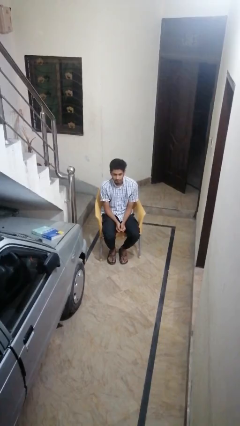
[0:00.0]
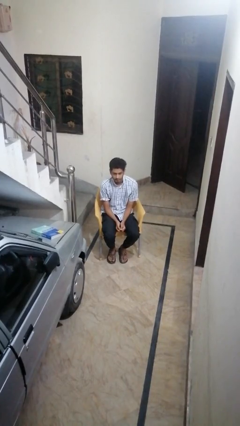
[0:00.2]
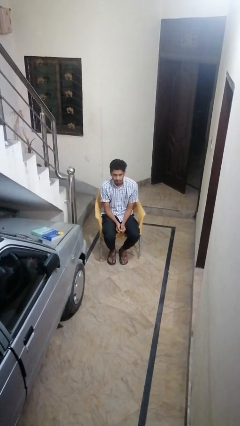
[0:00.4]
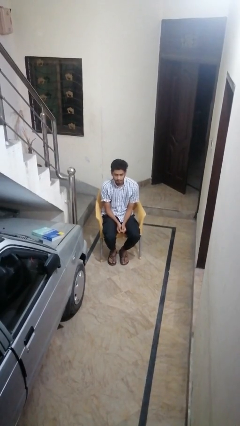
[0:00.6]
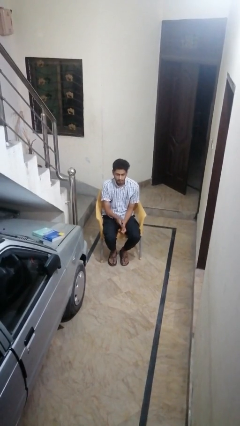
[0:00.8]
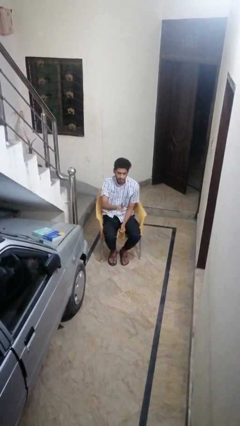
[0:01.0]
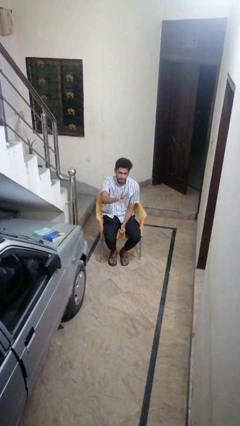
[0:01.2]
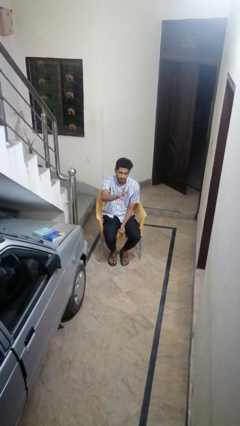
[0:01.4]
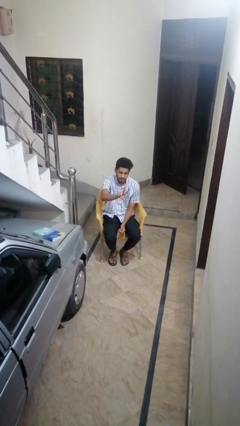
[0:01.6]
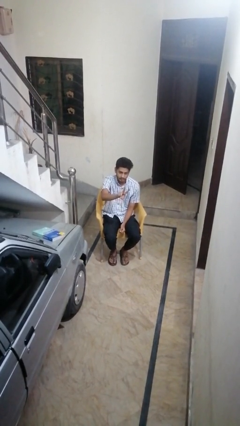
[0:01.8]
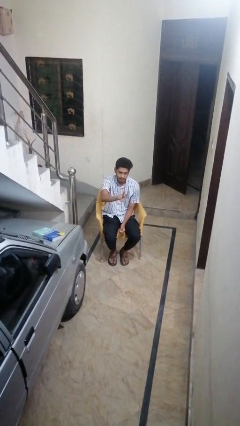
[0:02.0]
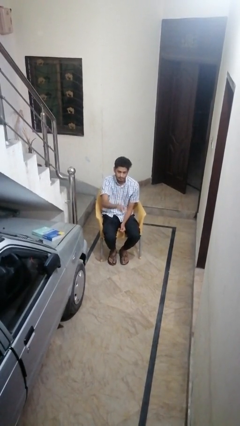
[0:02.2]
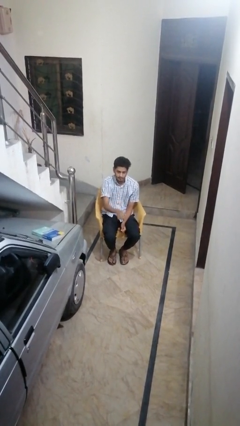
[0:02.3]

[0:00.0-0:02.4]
person gestures peace

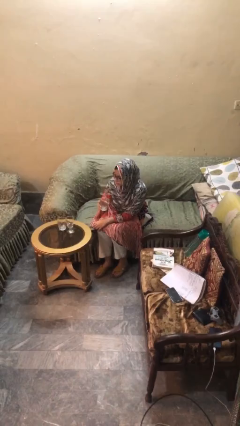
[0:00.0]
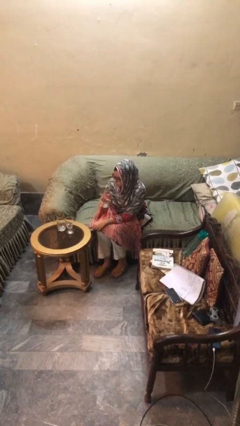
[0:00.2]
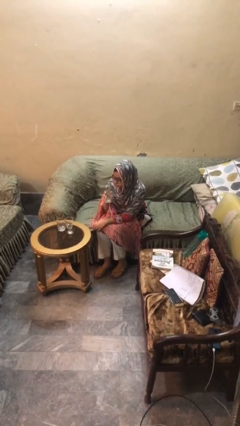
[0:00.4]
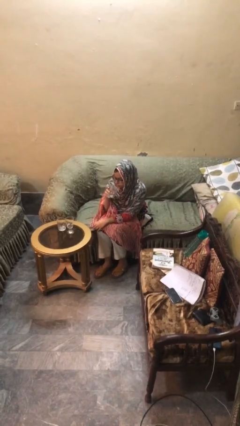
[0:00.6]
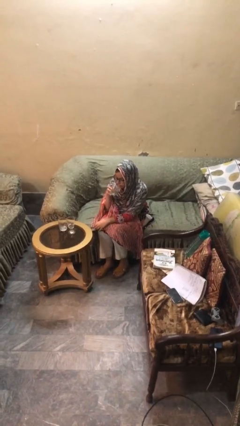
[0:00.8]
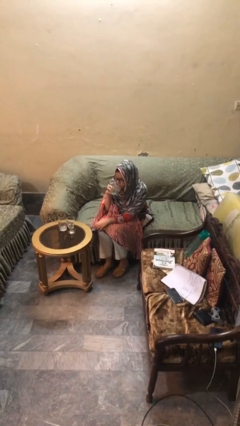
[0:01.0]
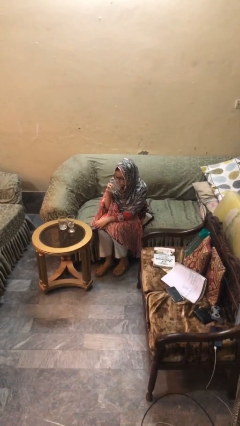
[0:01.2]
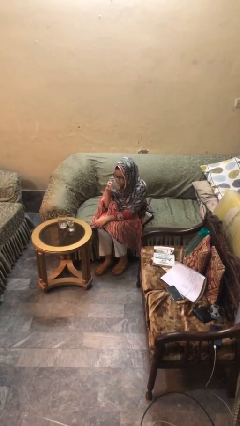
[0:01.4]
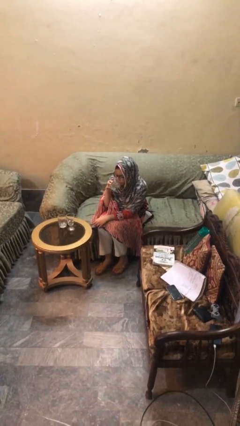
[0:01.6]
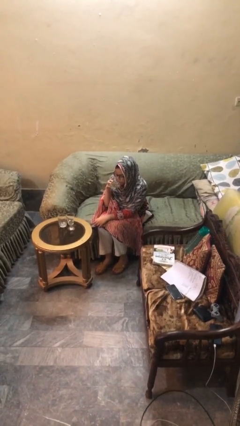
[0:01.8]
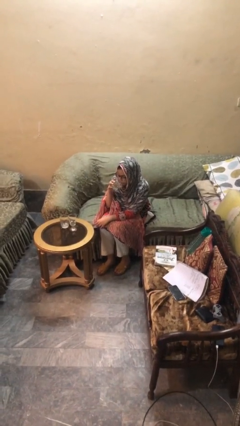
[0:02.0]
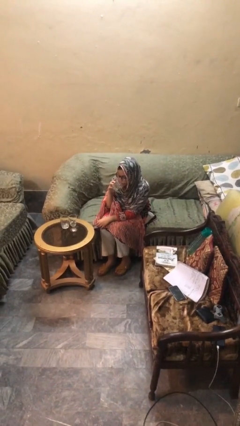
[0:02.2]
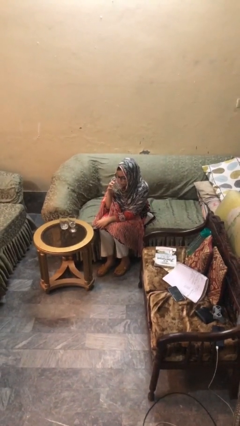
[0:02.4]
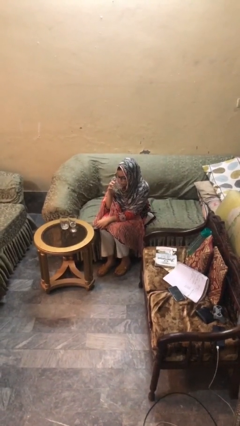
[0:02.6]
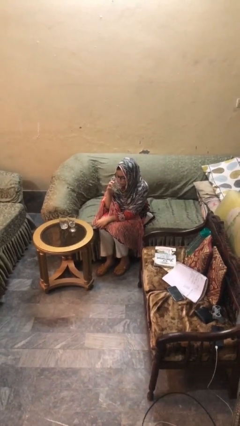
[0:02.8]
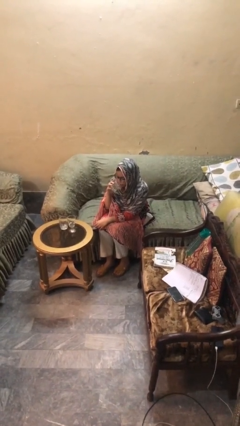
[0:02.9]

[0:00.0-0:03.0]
person drinks from shotglass

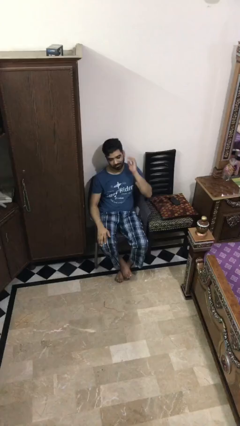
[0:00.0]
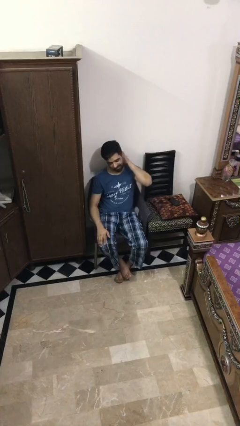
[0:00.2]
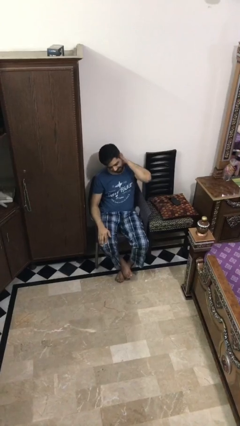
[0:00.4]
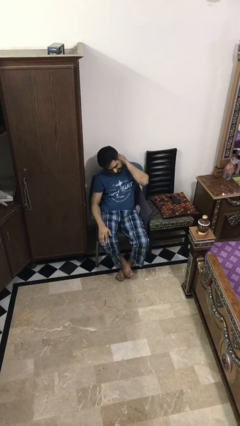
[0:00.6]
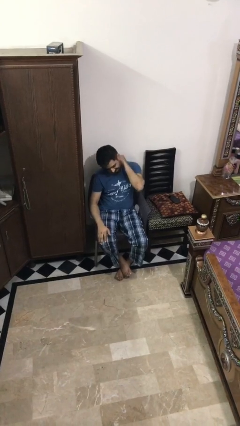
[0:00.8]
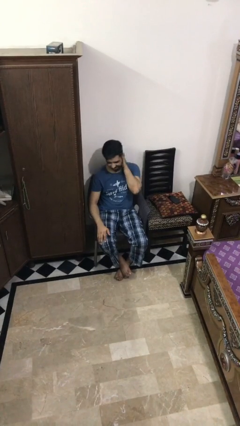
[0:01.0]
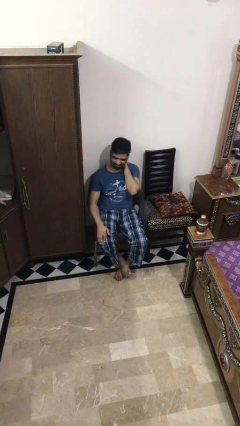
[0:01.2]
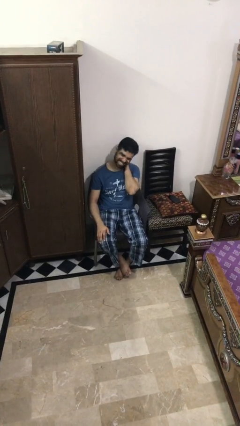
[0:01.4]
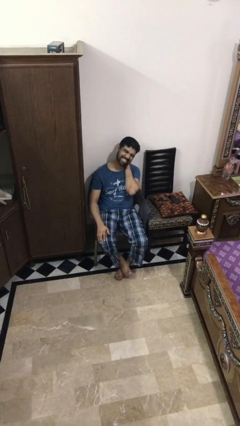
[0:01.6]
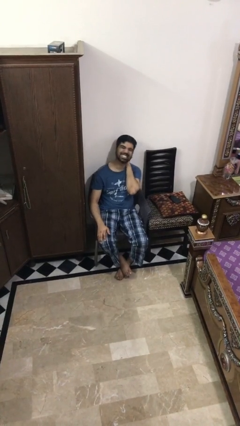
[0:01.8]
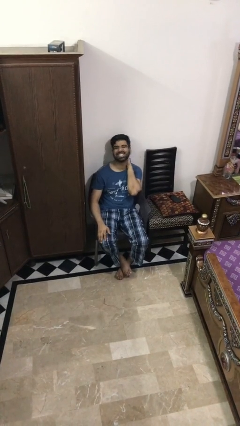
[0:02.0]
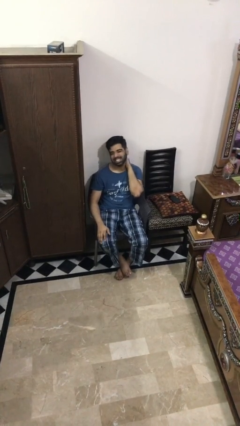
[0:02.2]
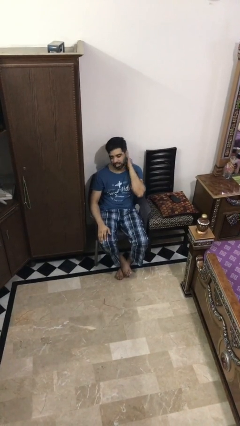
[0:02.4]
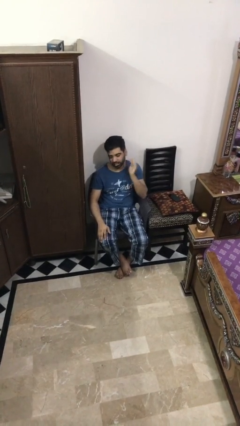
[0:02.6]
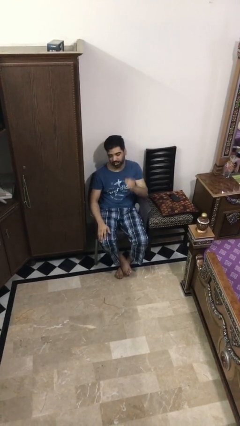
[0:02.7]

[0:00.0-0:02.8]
person rubs neck

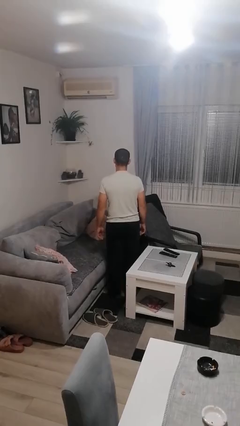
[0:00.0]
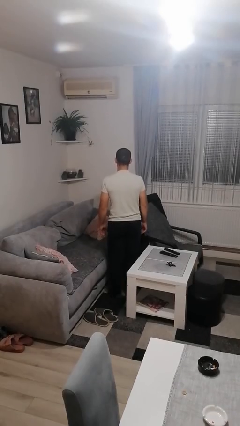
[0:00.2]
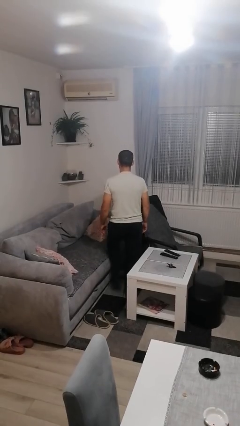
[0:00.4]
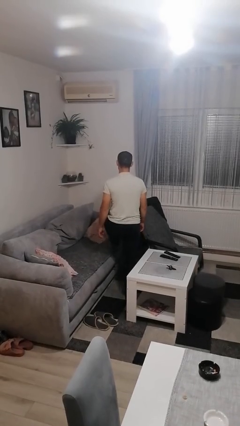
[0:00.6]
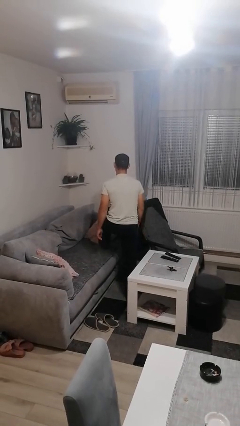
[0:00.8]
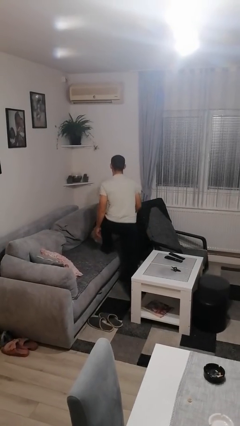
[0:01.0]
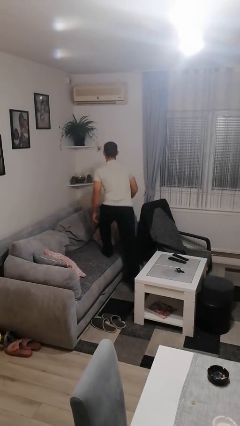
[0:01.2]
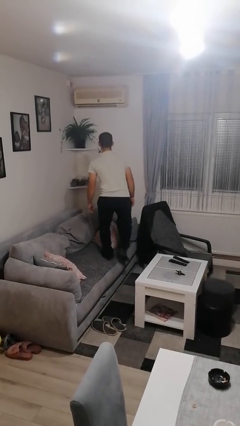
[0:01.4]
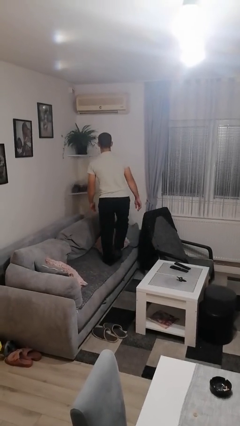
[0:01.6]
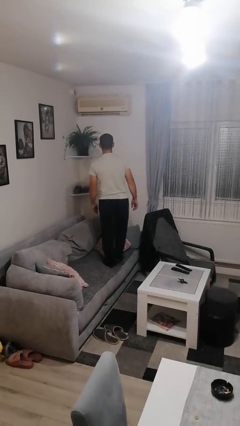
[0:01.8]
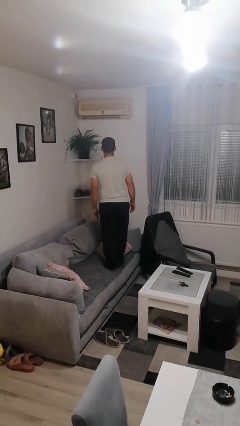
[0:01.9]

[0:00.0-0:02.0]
person climbs on couch

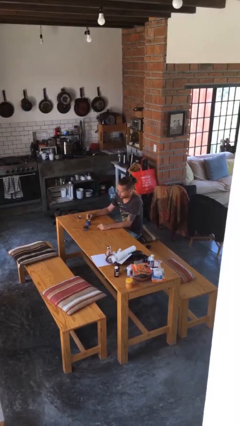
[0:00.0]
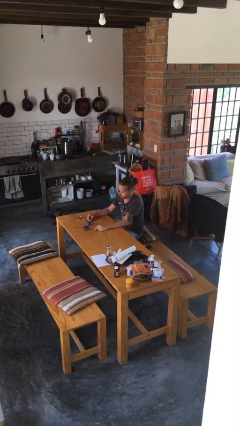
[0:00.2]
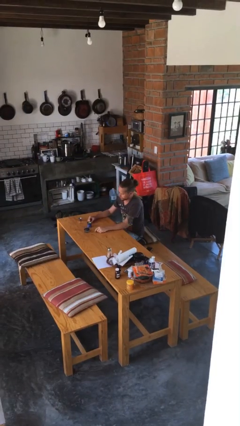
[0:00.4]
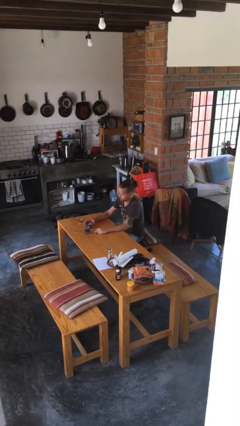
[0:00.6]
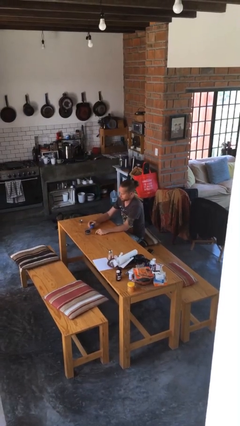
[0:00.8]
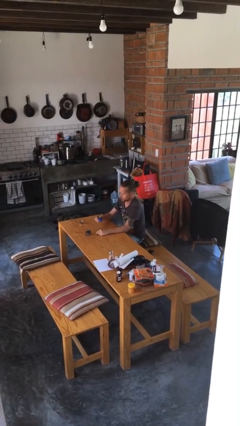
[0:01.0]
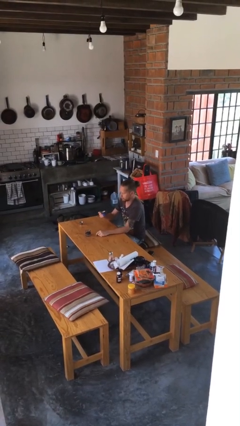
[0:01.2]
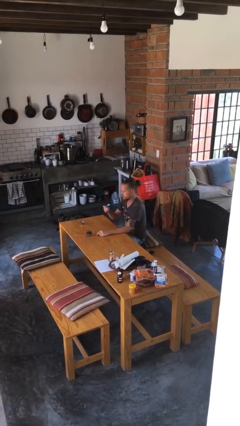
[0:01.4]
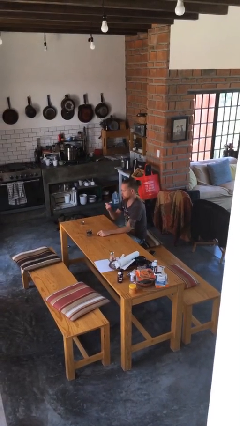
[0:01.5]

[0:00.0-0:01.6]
person picks up object from table

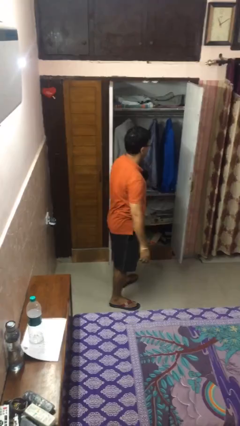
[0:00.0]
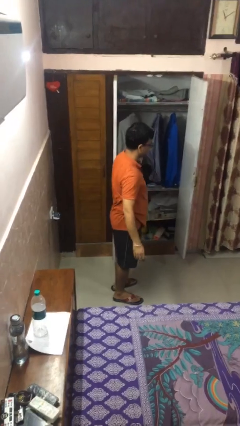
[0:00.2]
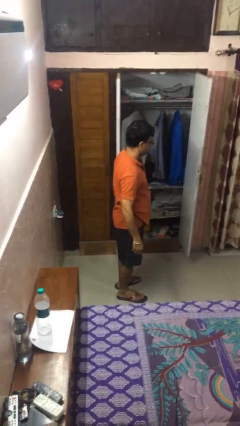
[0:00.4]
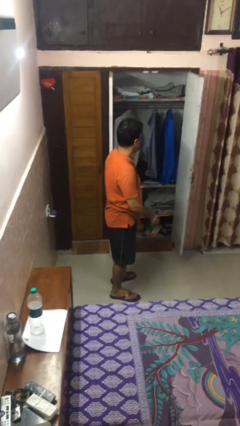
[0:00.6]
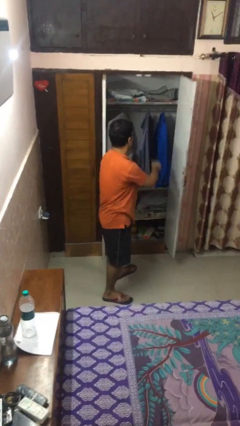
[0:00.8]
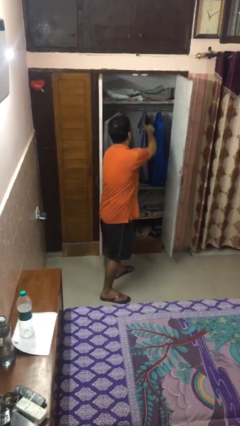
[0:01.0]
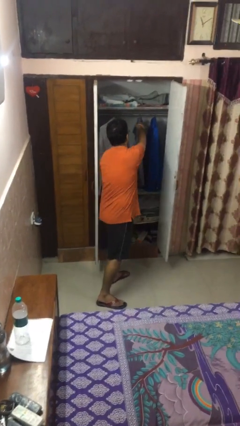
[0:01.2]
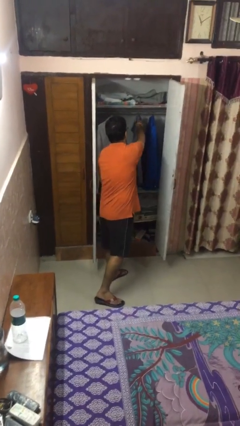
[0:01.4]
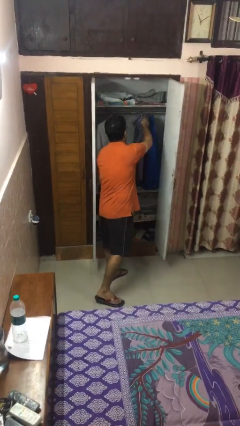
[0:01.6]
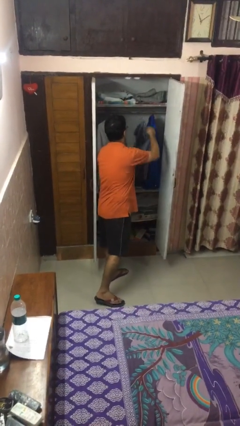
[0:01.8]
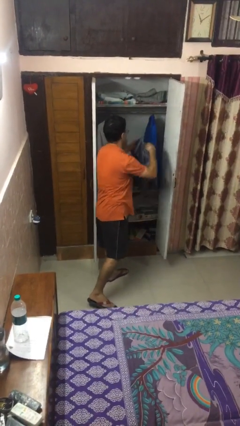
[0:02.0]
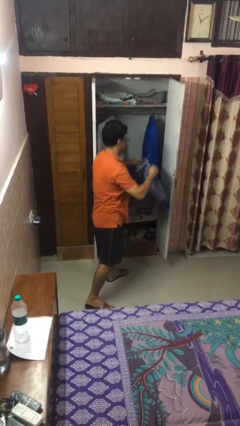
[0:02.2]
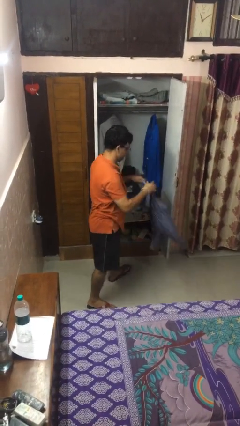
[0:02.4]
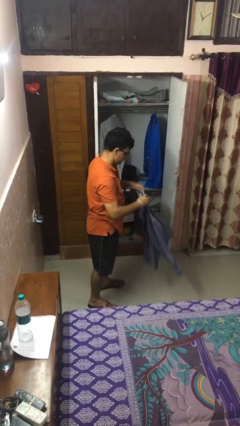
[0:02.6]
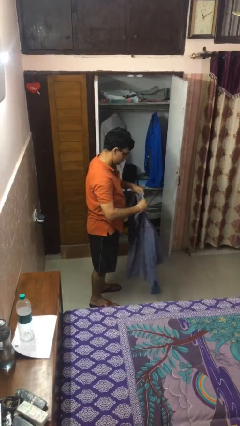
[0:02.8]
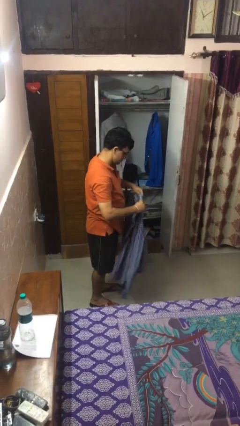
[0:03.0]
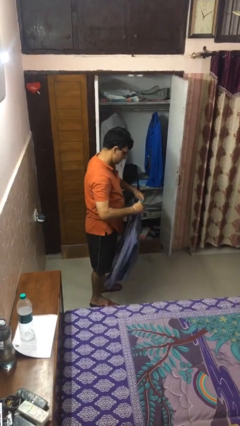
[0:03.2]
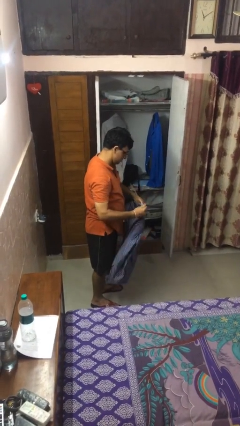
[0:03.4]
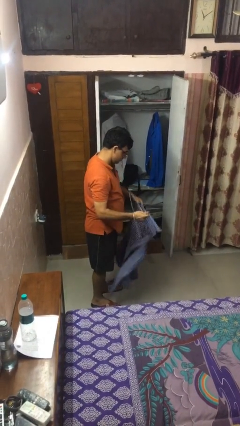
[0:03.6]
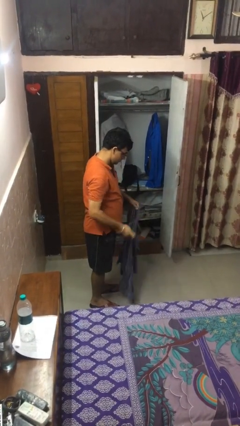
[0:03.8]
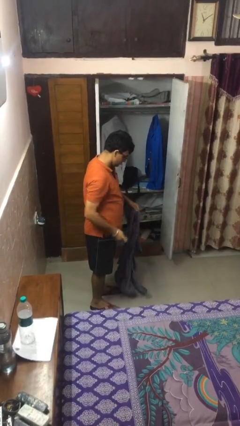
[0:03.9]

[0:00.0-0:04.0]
person takes clothes from closet

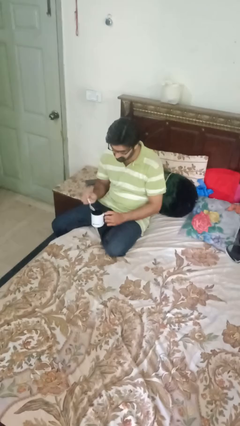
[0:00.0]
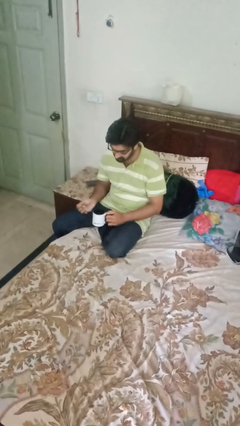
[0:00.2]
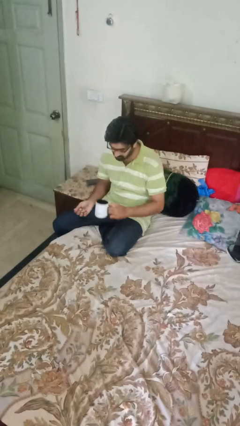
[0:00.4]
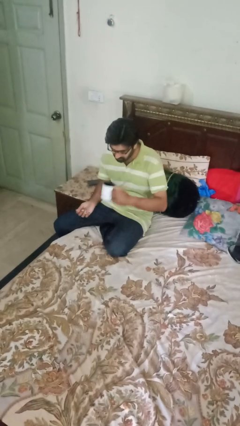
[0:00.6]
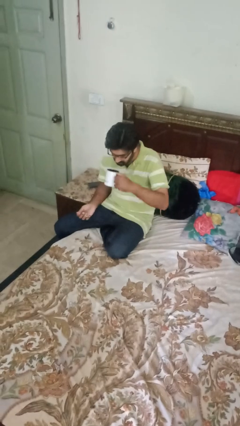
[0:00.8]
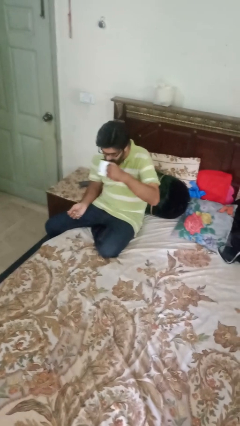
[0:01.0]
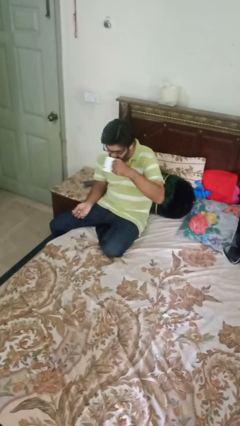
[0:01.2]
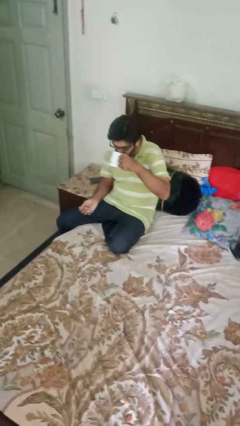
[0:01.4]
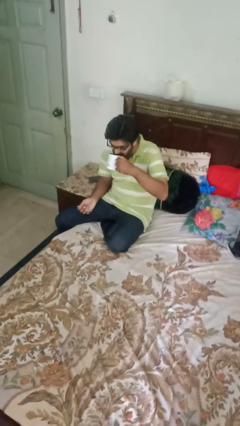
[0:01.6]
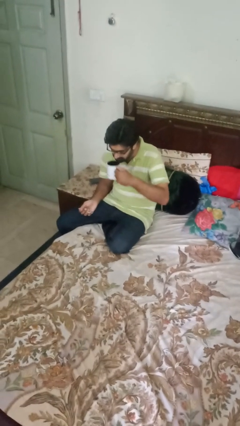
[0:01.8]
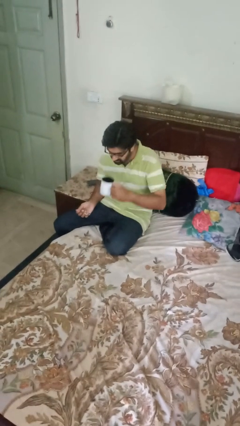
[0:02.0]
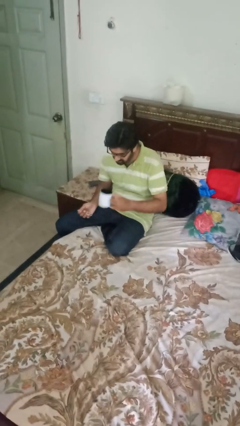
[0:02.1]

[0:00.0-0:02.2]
person drinks from mug
